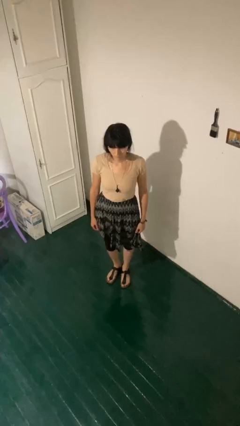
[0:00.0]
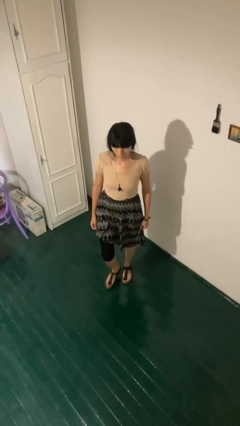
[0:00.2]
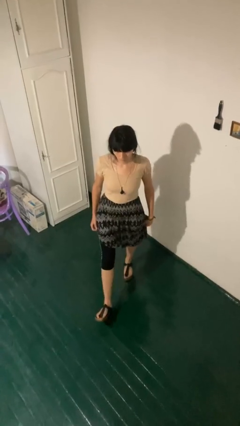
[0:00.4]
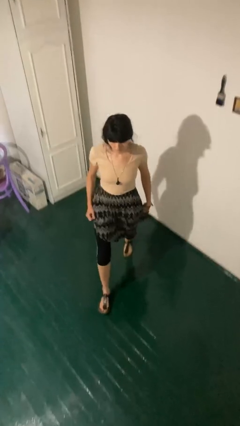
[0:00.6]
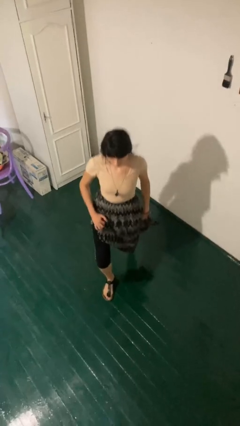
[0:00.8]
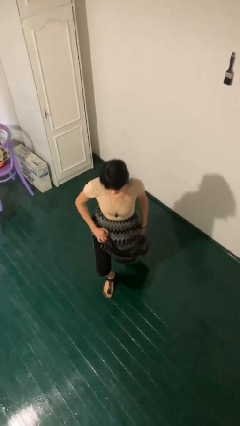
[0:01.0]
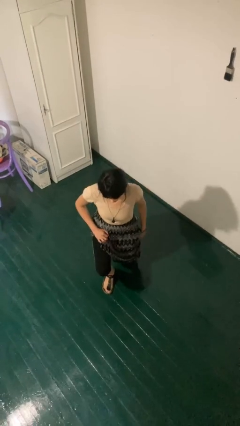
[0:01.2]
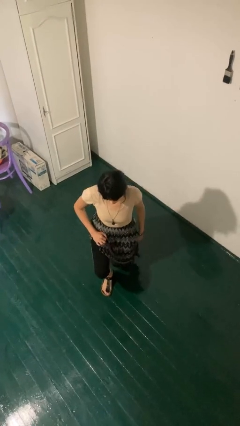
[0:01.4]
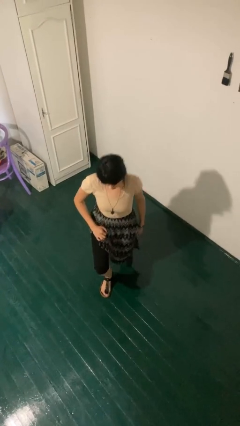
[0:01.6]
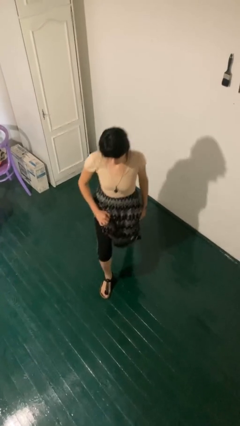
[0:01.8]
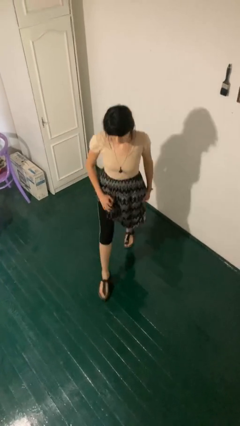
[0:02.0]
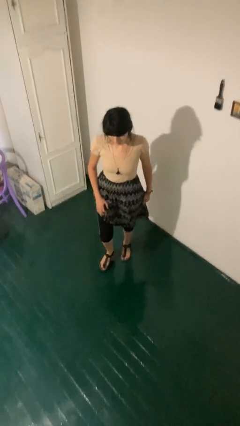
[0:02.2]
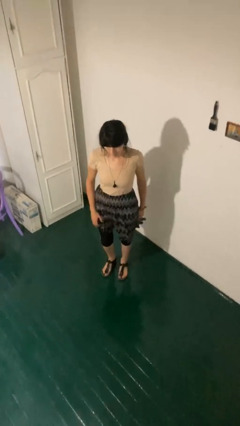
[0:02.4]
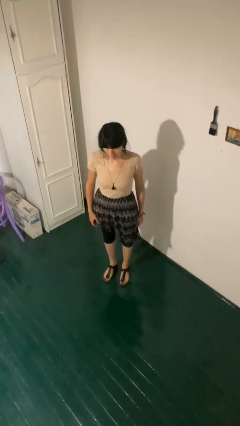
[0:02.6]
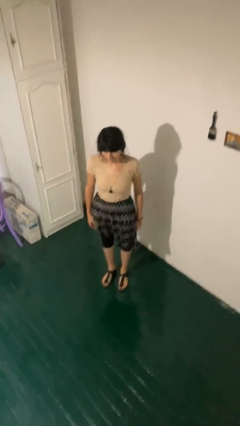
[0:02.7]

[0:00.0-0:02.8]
person exercises with lunges

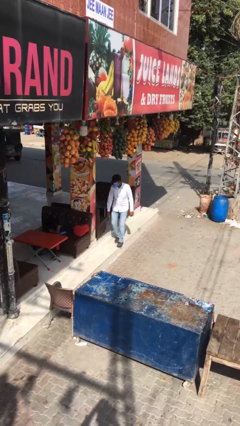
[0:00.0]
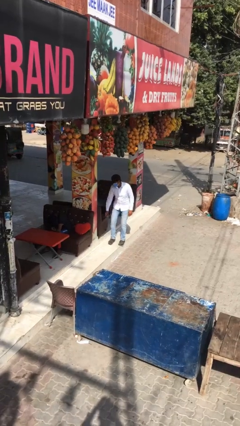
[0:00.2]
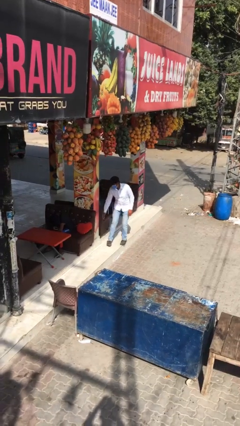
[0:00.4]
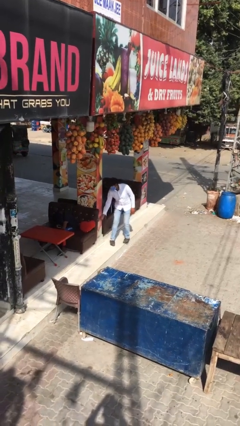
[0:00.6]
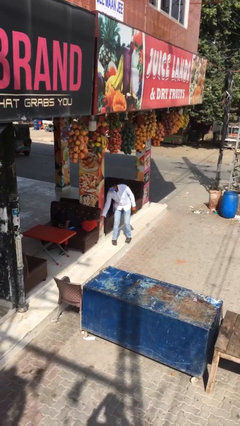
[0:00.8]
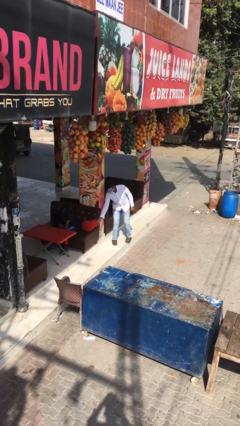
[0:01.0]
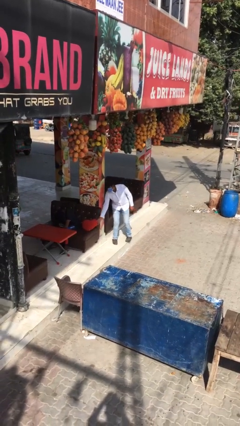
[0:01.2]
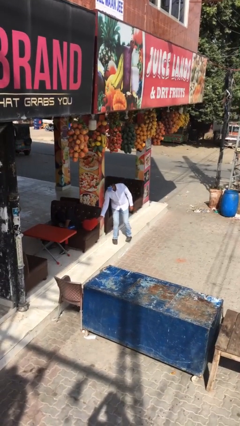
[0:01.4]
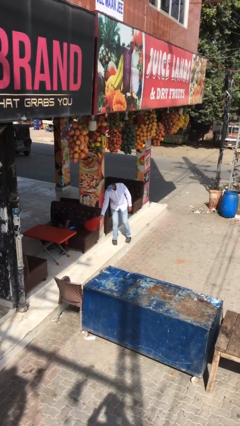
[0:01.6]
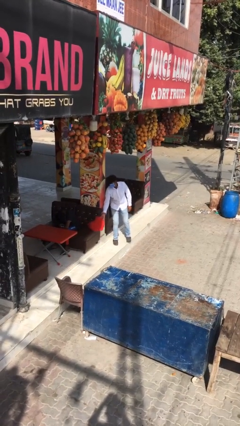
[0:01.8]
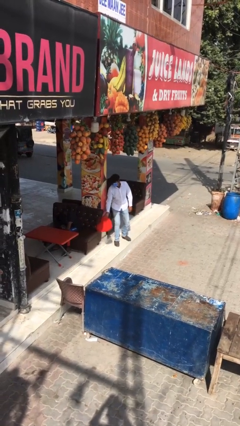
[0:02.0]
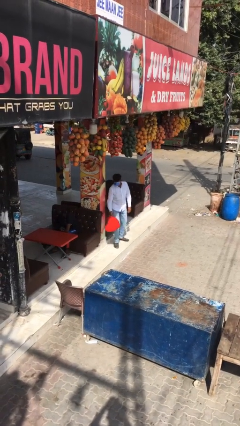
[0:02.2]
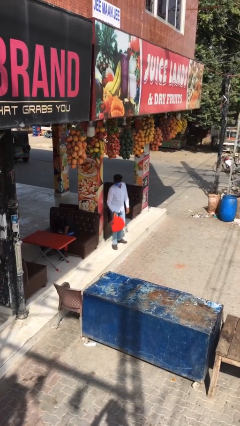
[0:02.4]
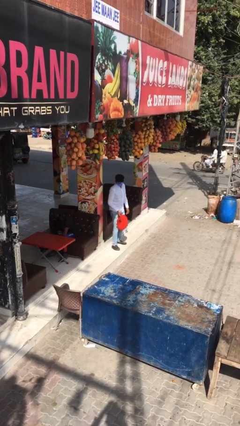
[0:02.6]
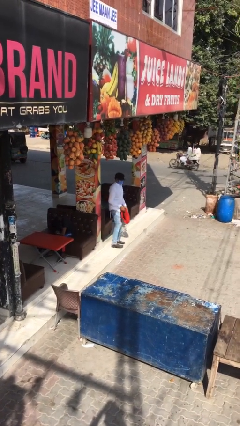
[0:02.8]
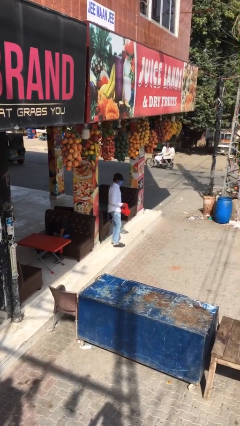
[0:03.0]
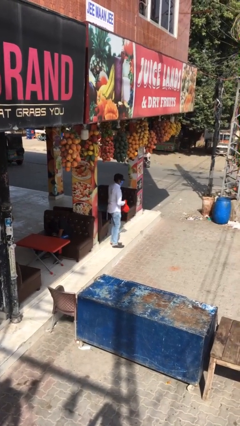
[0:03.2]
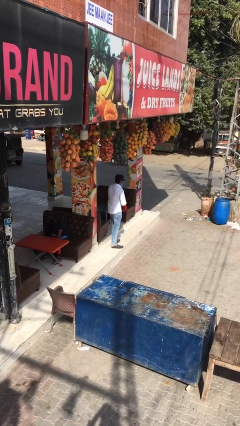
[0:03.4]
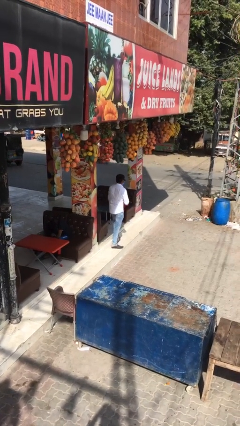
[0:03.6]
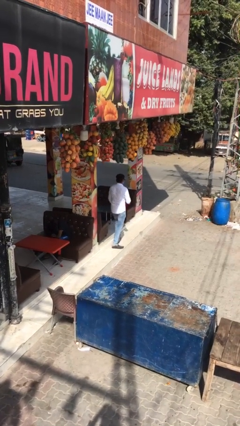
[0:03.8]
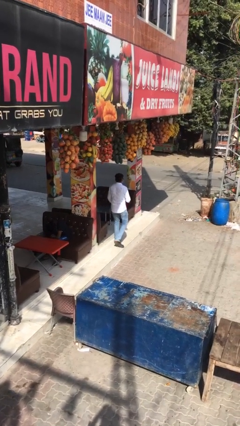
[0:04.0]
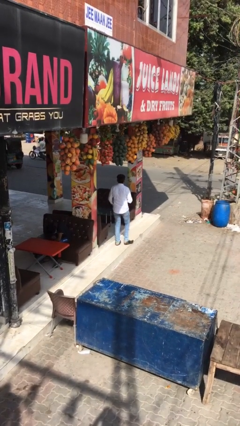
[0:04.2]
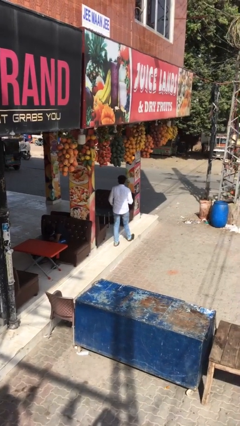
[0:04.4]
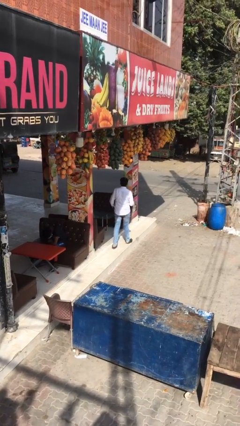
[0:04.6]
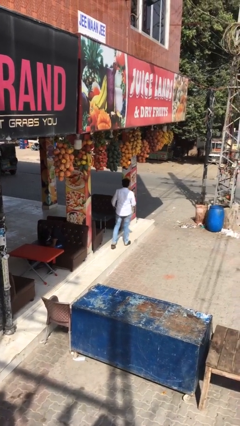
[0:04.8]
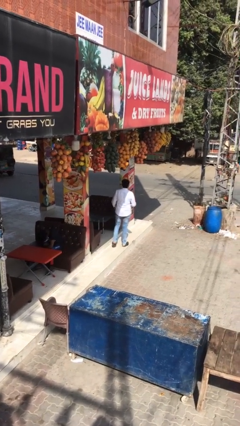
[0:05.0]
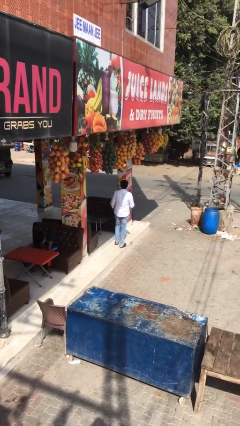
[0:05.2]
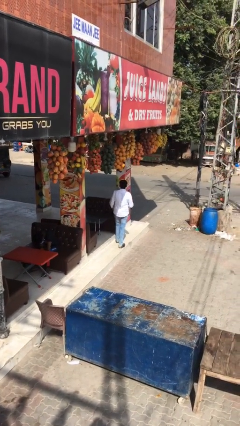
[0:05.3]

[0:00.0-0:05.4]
person steals object from person

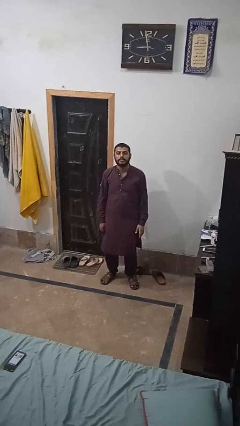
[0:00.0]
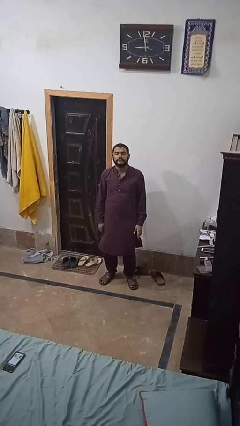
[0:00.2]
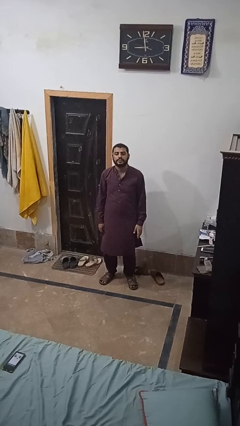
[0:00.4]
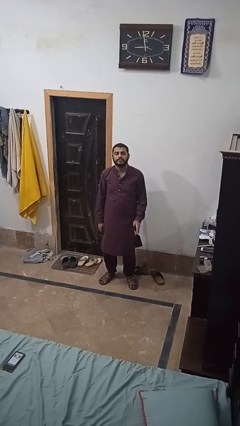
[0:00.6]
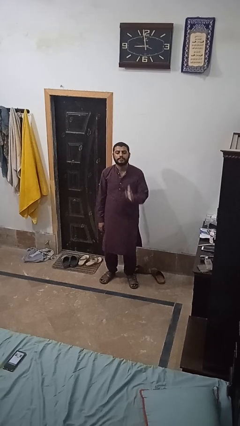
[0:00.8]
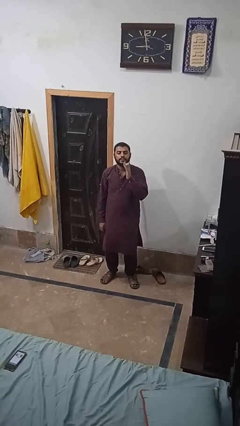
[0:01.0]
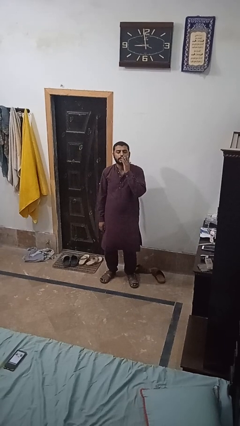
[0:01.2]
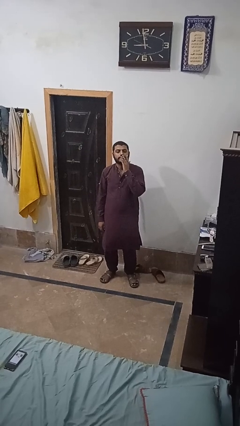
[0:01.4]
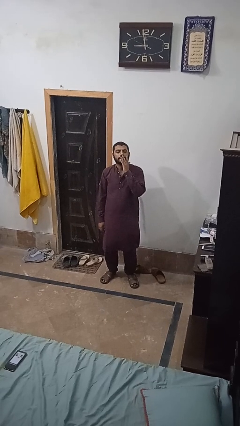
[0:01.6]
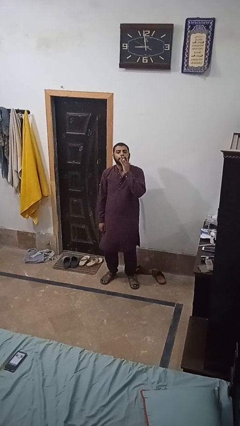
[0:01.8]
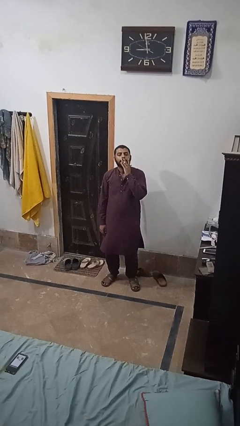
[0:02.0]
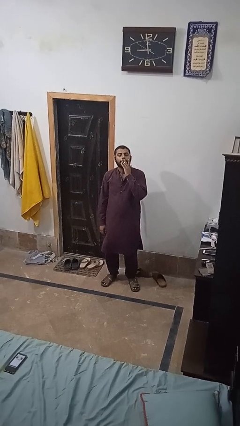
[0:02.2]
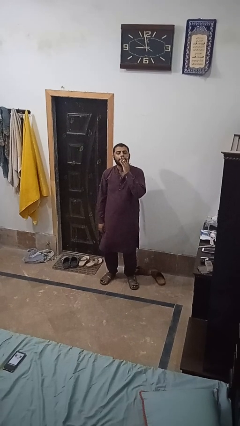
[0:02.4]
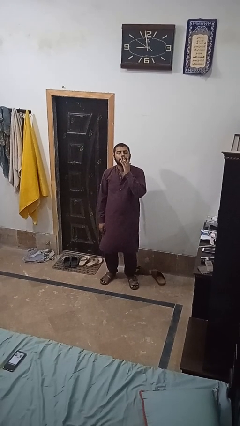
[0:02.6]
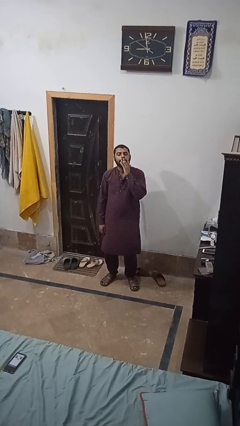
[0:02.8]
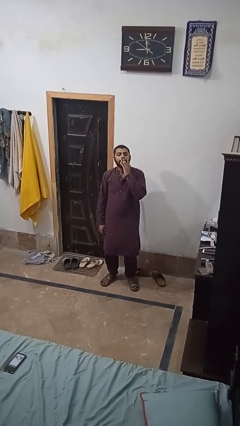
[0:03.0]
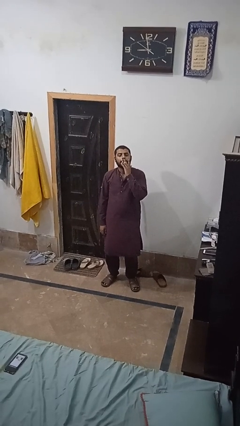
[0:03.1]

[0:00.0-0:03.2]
person vapes

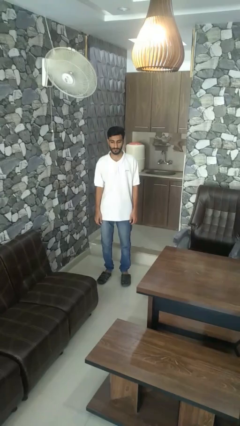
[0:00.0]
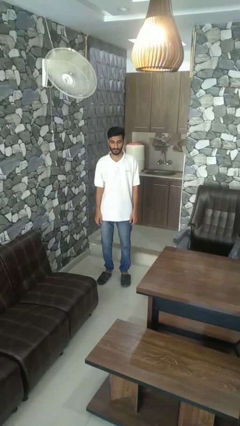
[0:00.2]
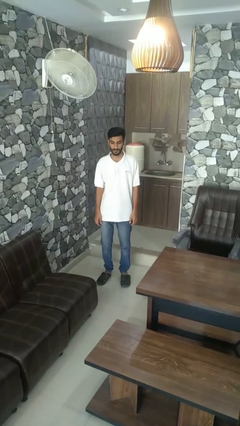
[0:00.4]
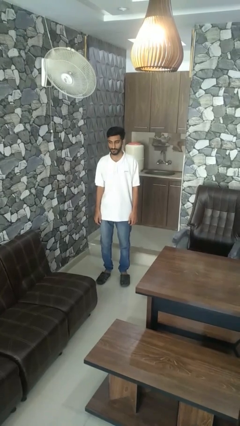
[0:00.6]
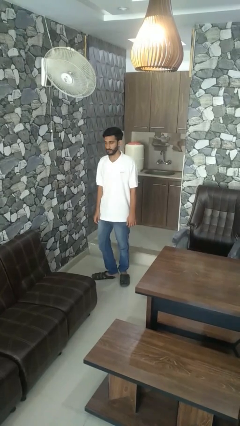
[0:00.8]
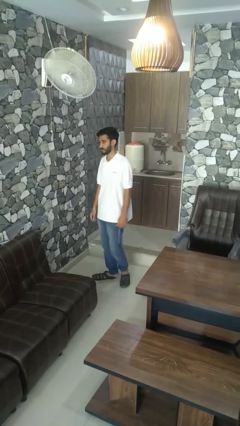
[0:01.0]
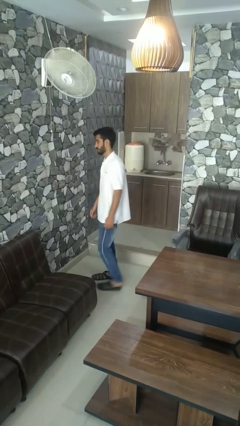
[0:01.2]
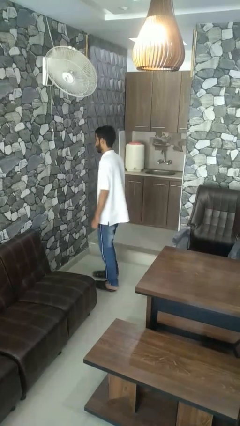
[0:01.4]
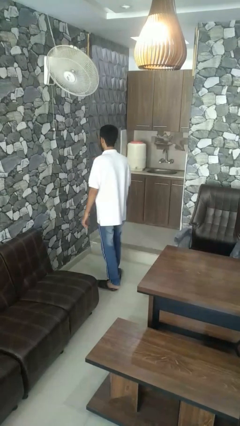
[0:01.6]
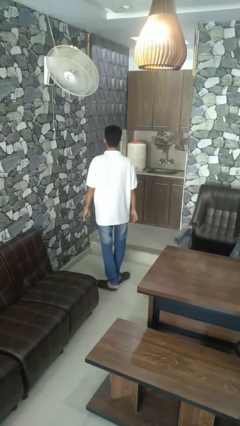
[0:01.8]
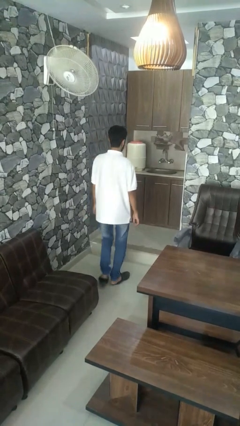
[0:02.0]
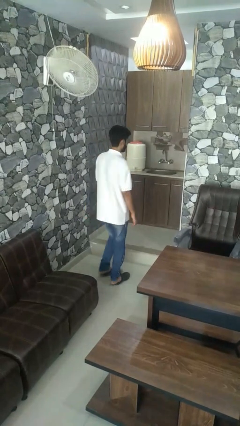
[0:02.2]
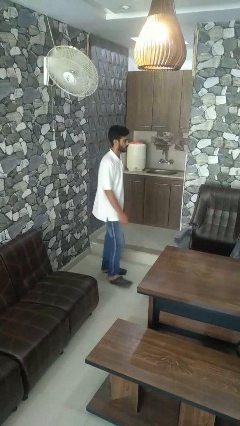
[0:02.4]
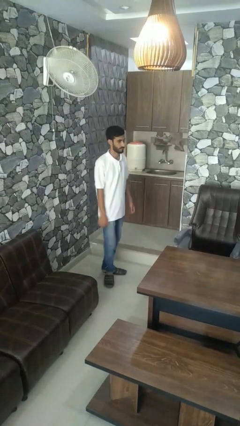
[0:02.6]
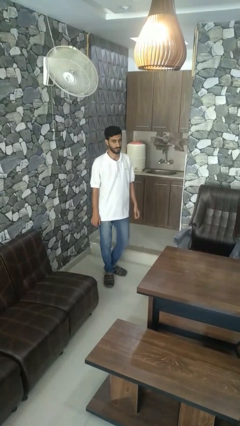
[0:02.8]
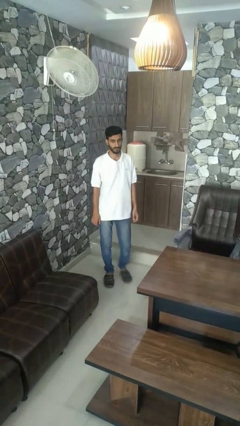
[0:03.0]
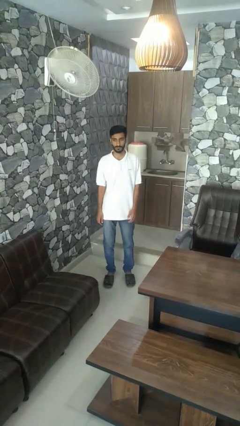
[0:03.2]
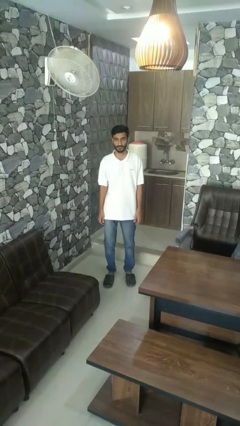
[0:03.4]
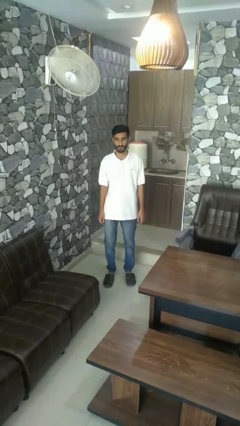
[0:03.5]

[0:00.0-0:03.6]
person twirls

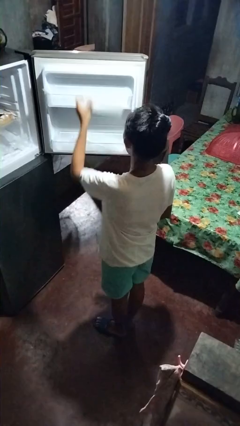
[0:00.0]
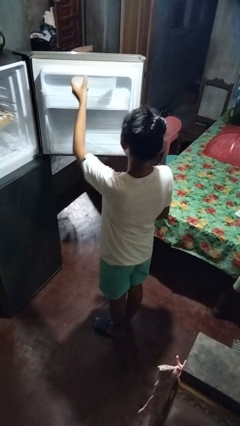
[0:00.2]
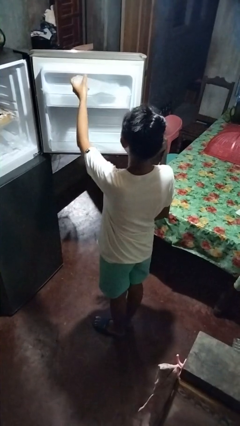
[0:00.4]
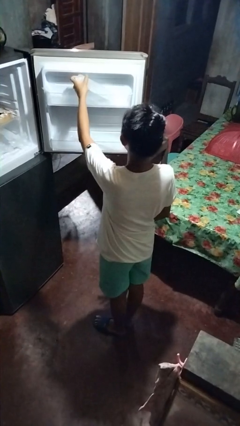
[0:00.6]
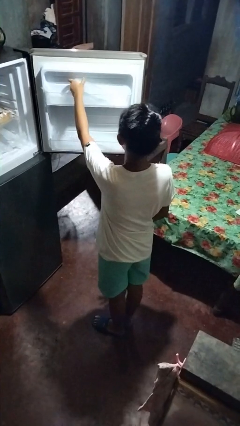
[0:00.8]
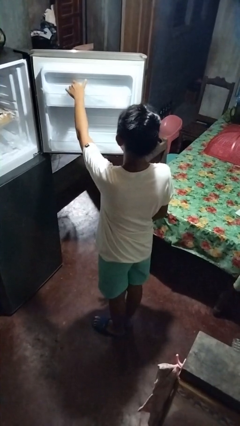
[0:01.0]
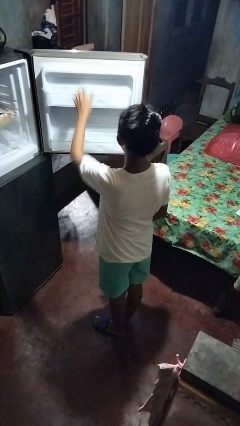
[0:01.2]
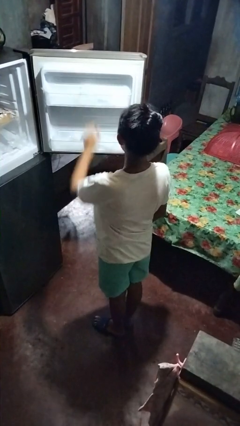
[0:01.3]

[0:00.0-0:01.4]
person puts object into refrigerator

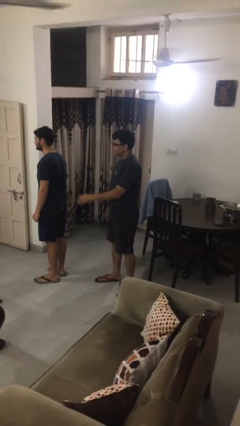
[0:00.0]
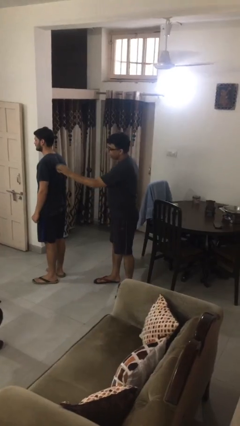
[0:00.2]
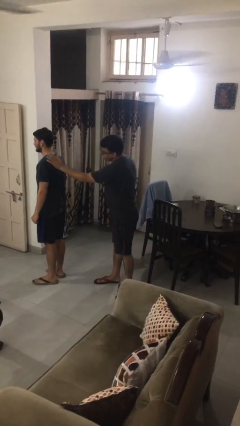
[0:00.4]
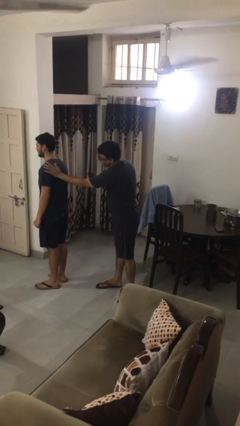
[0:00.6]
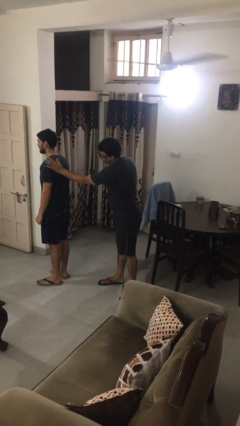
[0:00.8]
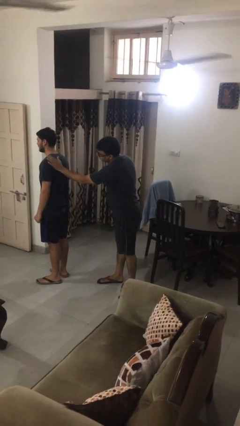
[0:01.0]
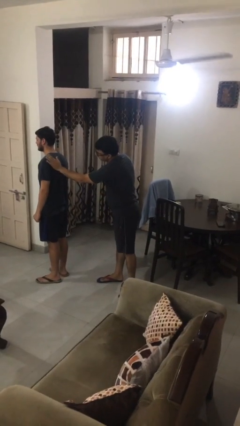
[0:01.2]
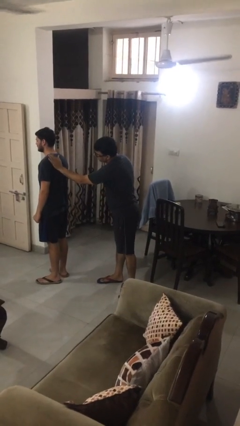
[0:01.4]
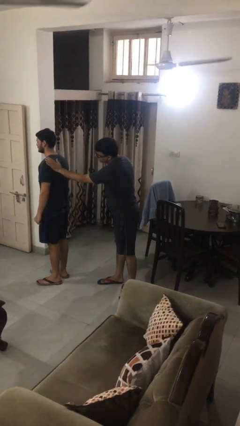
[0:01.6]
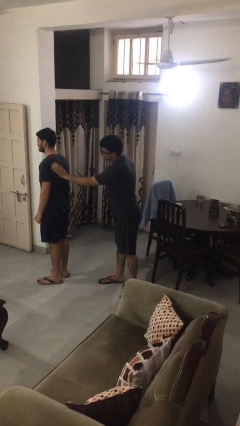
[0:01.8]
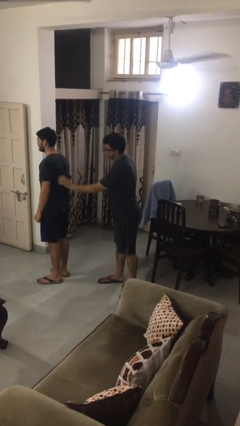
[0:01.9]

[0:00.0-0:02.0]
person touches back of person
